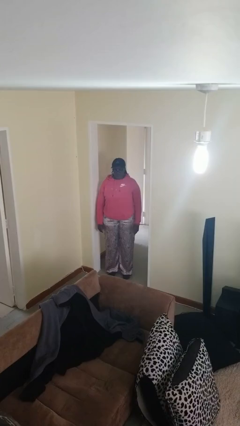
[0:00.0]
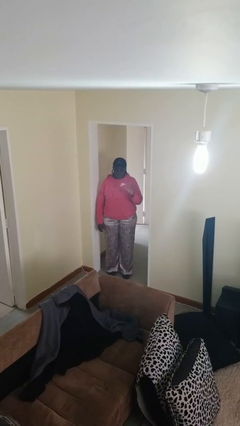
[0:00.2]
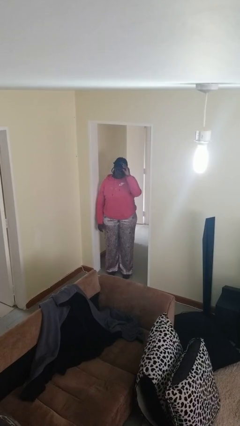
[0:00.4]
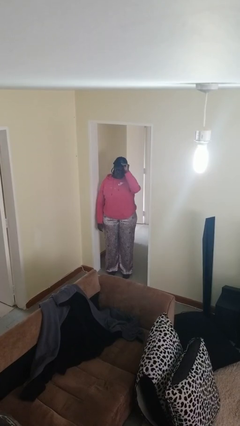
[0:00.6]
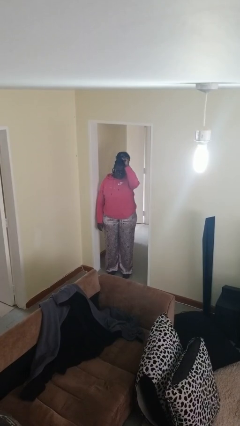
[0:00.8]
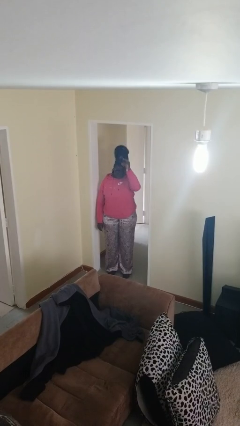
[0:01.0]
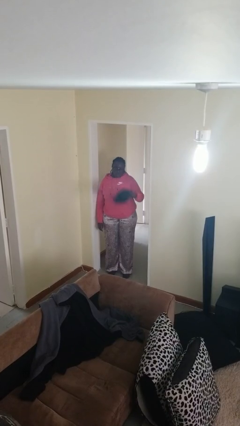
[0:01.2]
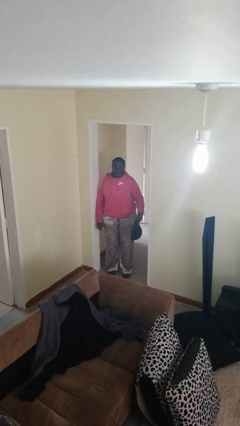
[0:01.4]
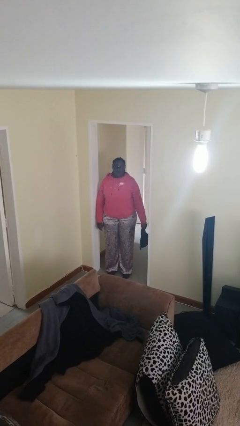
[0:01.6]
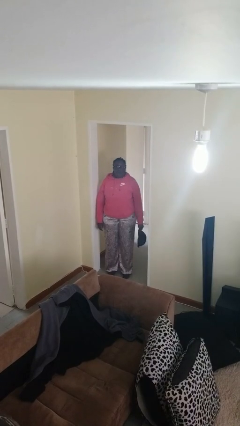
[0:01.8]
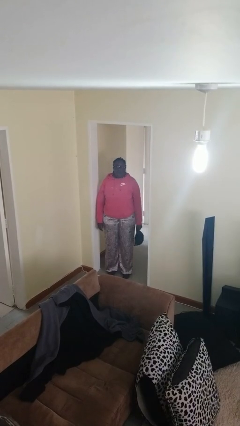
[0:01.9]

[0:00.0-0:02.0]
person takes off hat

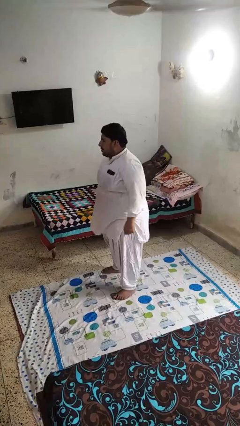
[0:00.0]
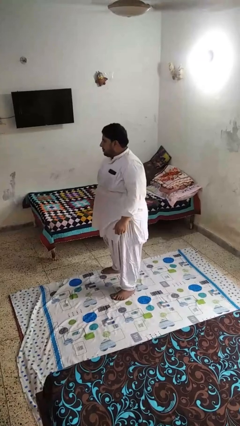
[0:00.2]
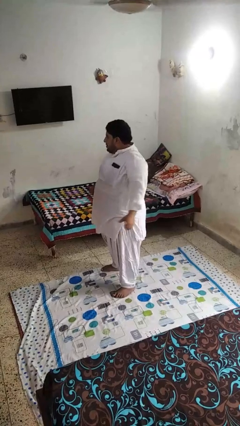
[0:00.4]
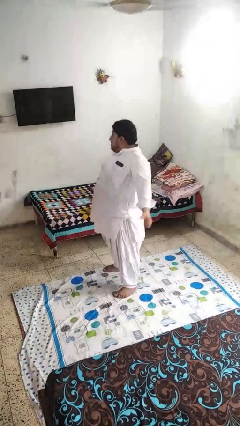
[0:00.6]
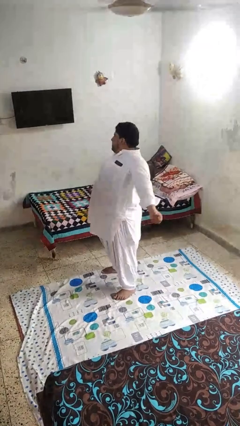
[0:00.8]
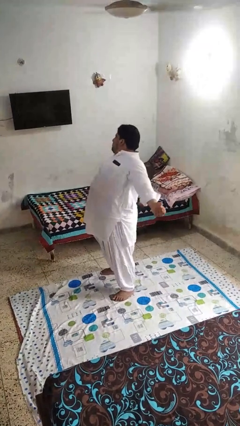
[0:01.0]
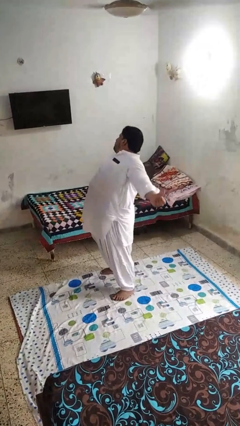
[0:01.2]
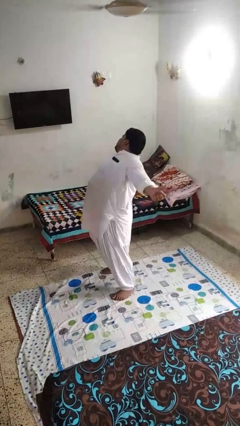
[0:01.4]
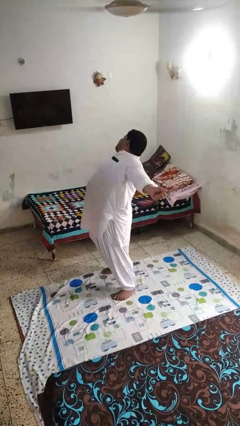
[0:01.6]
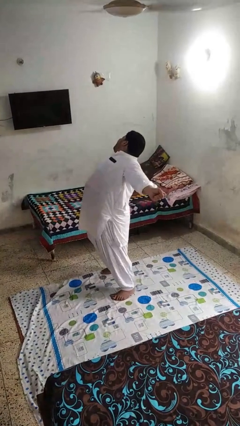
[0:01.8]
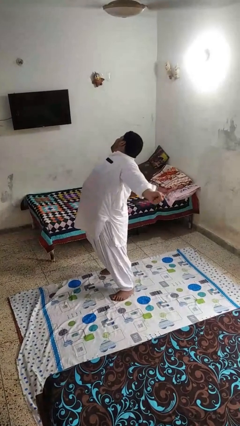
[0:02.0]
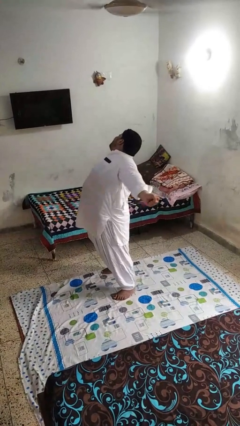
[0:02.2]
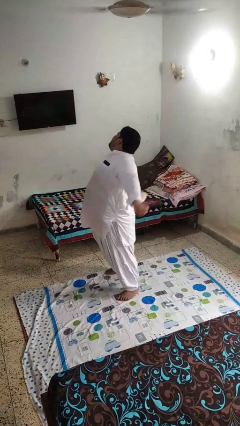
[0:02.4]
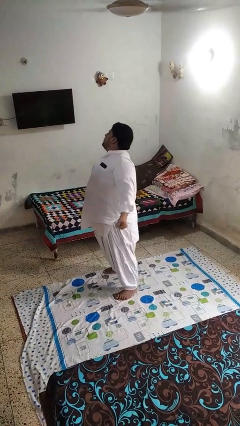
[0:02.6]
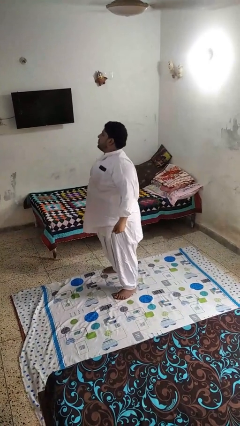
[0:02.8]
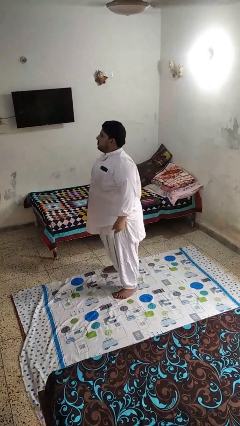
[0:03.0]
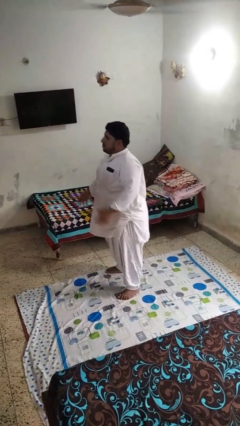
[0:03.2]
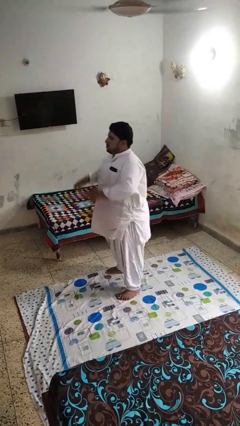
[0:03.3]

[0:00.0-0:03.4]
person stretches arms to side

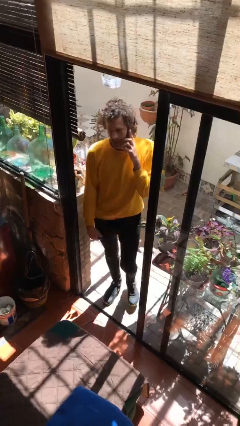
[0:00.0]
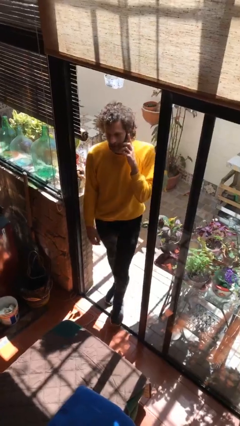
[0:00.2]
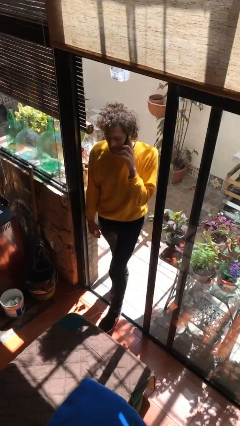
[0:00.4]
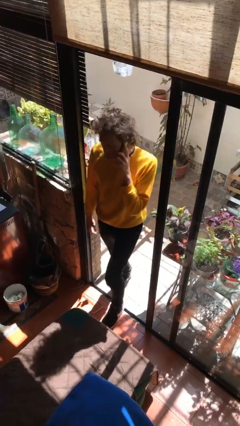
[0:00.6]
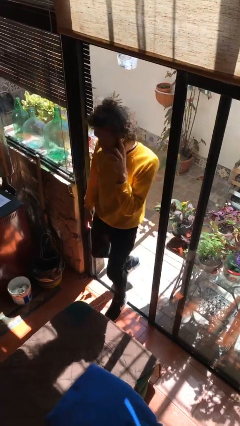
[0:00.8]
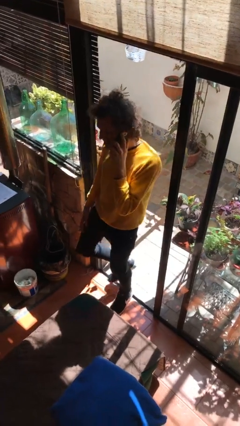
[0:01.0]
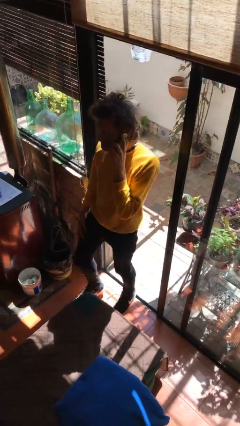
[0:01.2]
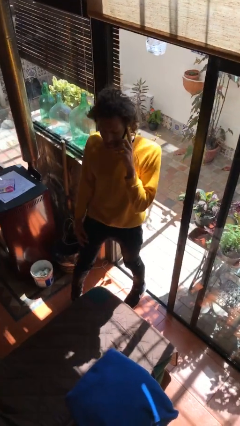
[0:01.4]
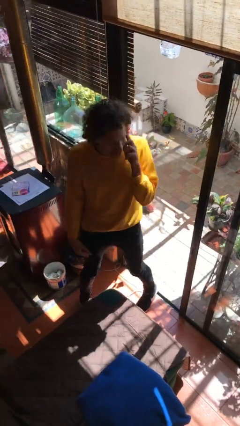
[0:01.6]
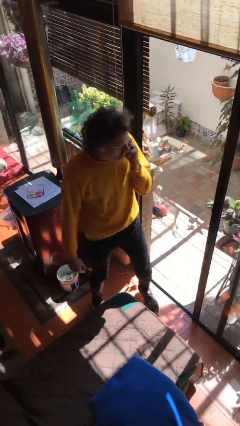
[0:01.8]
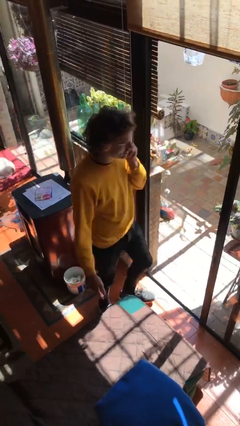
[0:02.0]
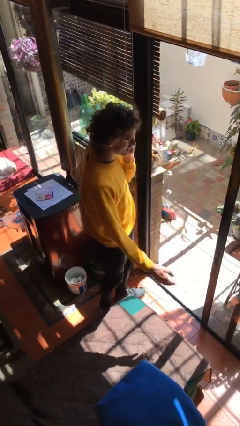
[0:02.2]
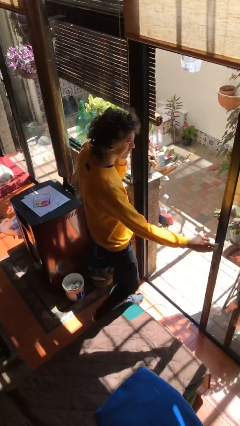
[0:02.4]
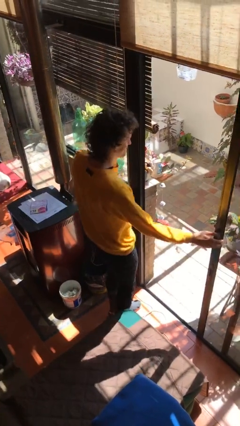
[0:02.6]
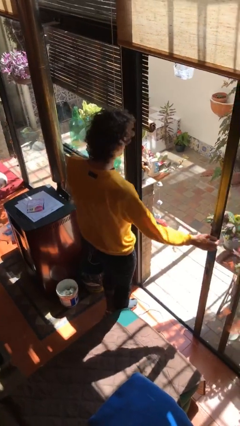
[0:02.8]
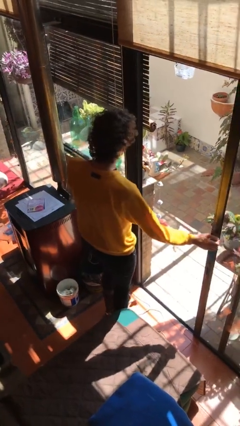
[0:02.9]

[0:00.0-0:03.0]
person enters scene through structure

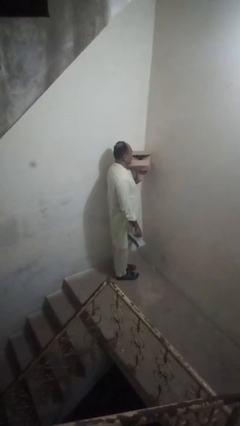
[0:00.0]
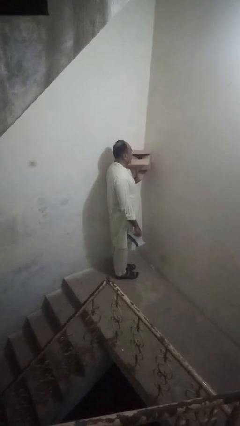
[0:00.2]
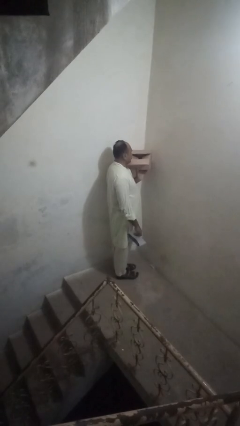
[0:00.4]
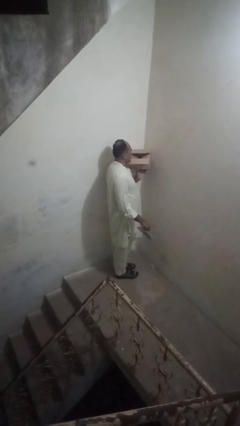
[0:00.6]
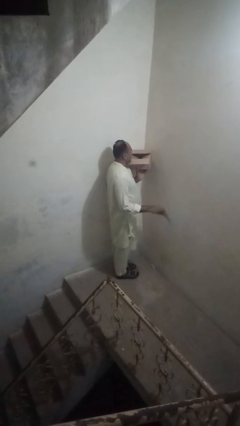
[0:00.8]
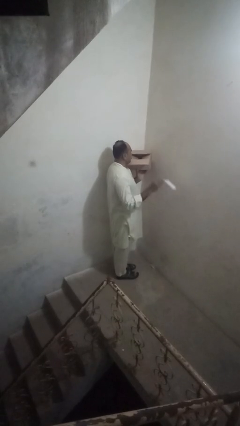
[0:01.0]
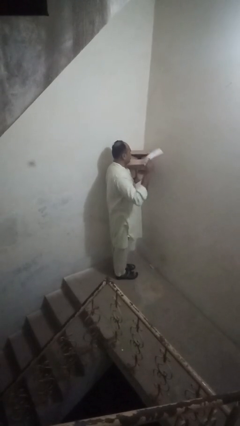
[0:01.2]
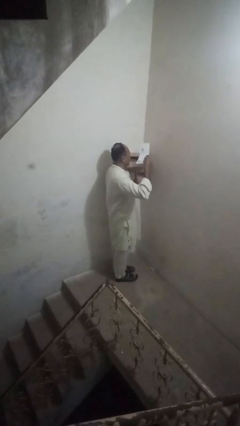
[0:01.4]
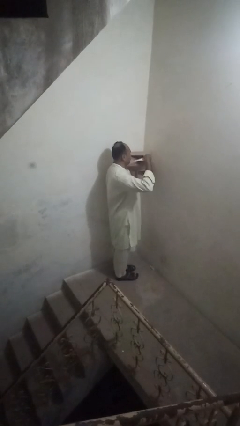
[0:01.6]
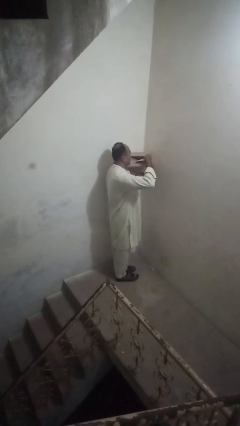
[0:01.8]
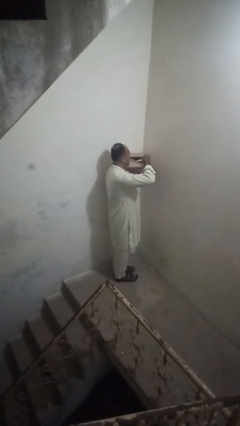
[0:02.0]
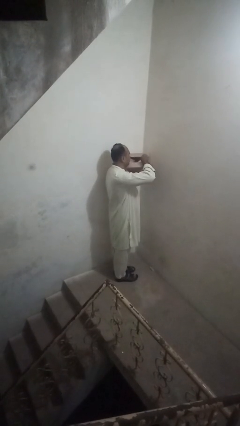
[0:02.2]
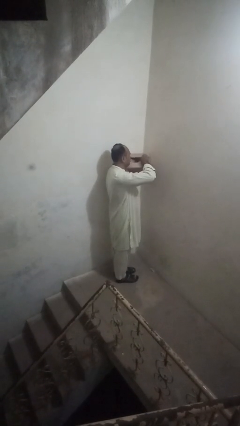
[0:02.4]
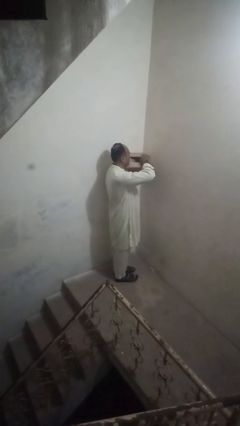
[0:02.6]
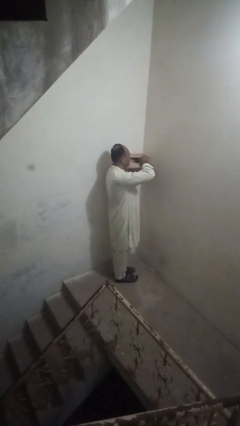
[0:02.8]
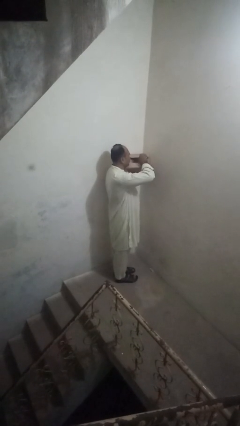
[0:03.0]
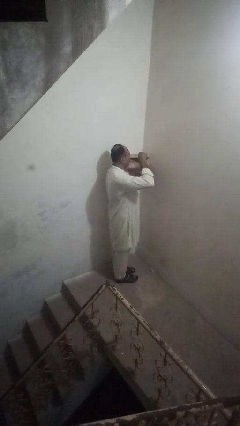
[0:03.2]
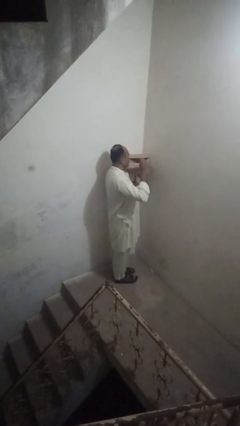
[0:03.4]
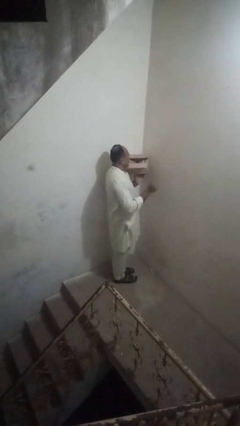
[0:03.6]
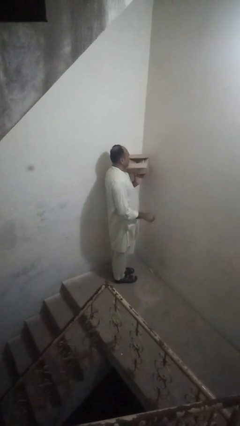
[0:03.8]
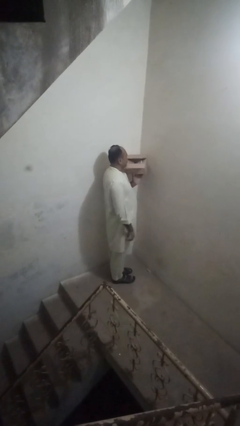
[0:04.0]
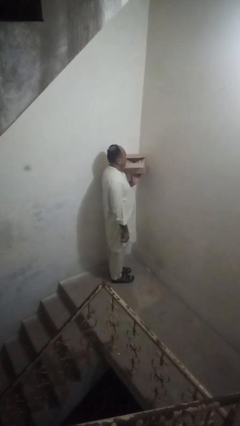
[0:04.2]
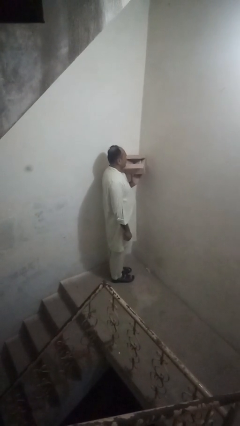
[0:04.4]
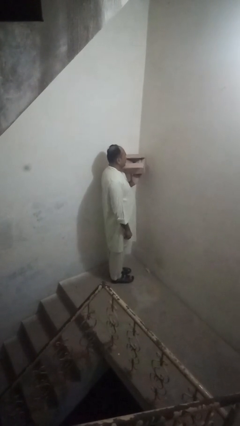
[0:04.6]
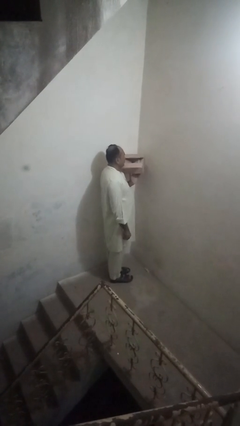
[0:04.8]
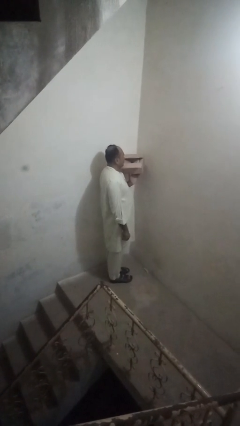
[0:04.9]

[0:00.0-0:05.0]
person puts letters in mailbox

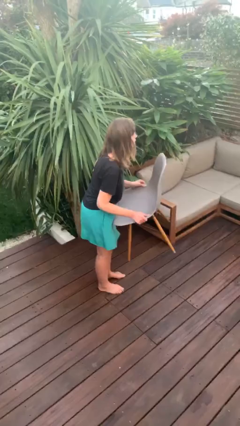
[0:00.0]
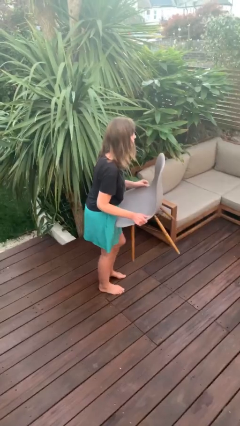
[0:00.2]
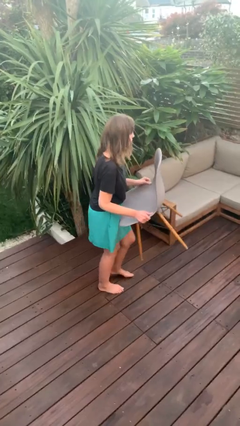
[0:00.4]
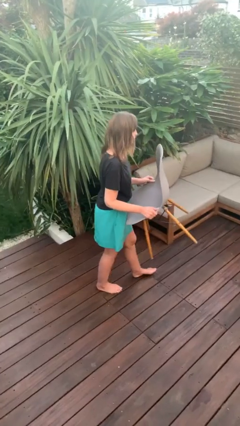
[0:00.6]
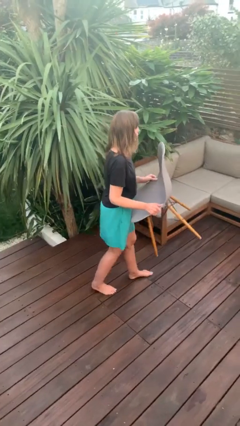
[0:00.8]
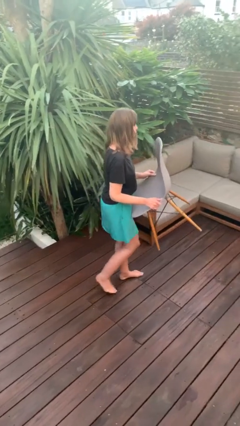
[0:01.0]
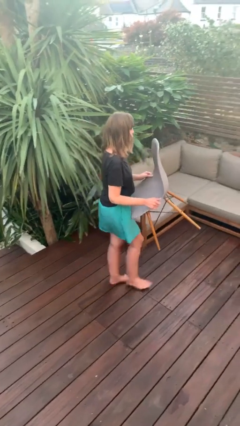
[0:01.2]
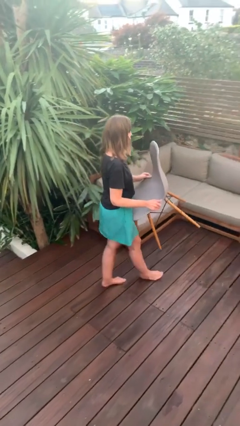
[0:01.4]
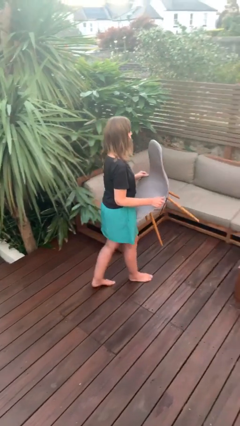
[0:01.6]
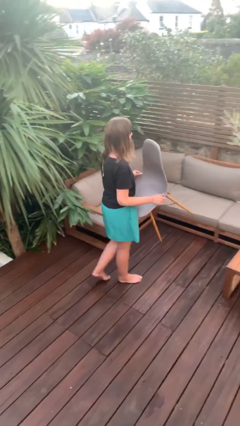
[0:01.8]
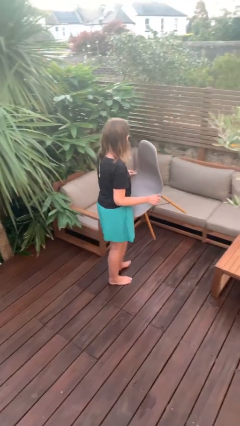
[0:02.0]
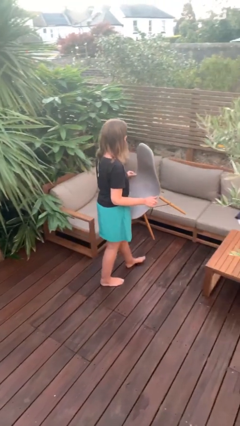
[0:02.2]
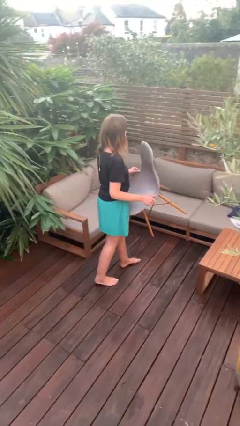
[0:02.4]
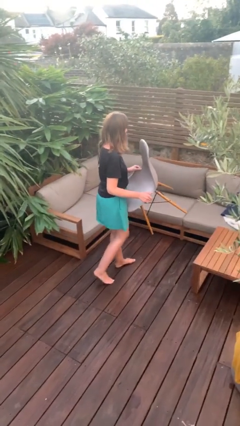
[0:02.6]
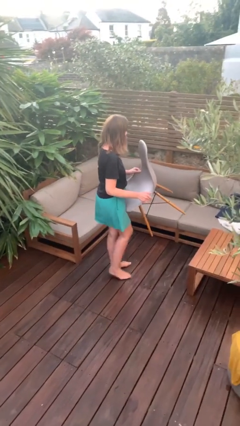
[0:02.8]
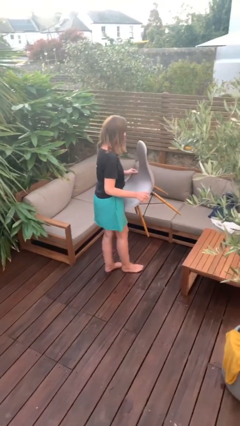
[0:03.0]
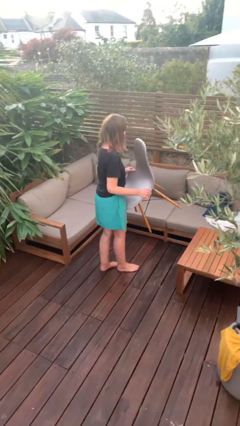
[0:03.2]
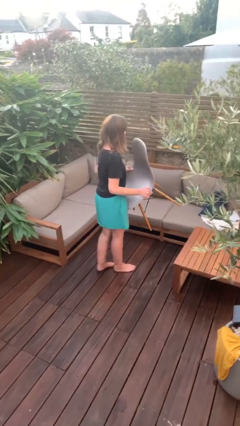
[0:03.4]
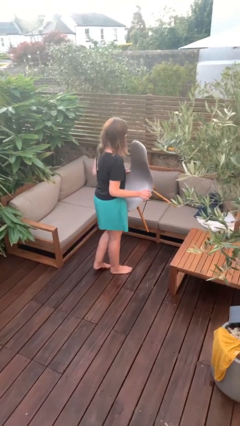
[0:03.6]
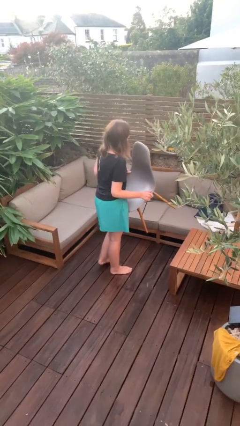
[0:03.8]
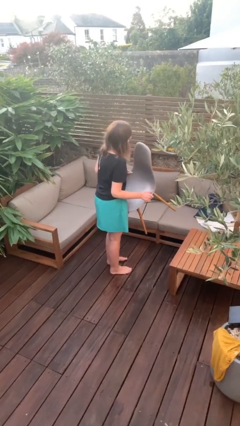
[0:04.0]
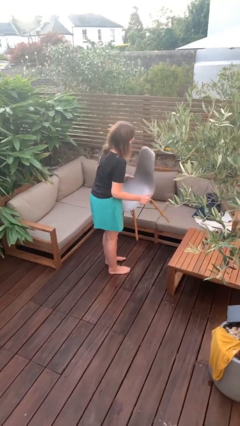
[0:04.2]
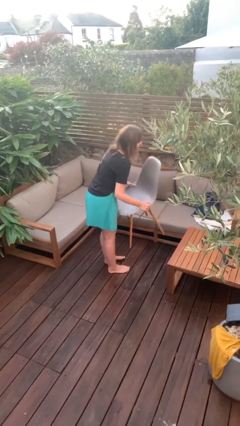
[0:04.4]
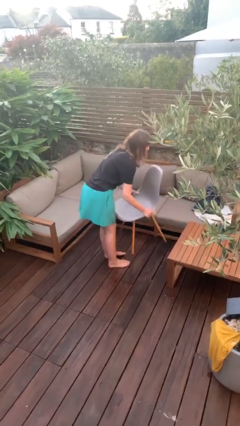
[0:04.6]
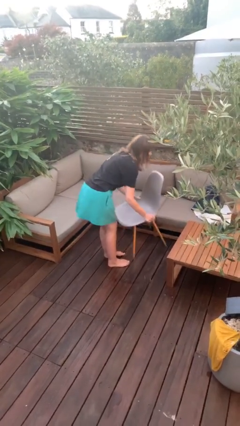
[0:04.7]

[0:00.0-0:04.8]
person carries heavy object
